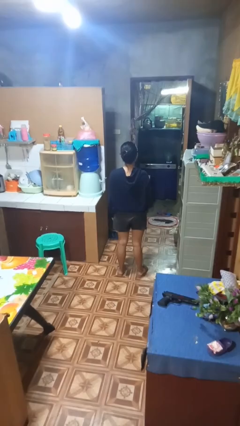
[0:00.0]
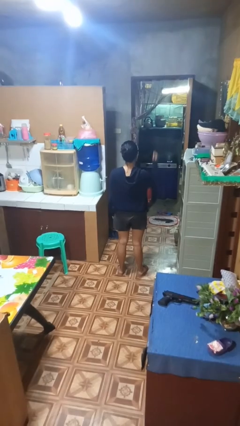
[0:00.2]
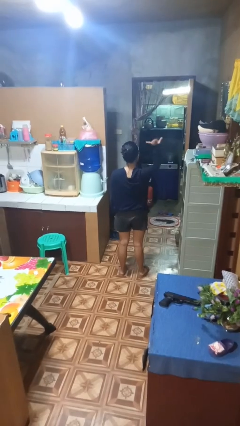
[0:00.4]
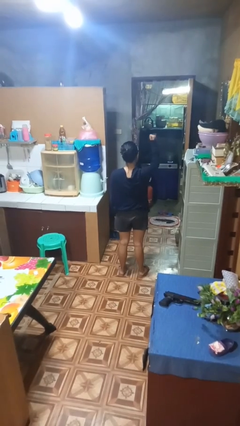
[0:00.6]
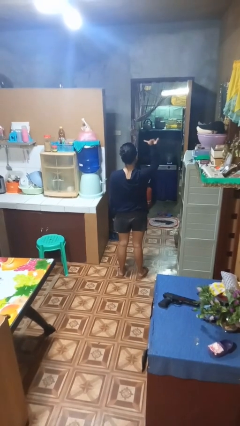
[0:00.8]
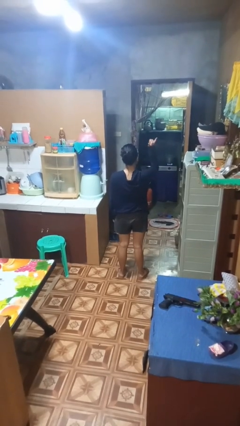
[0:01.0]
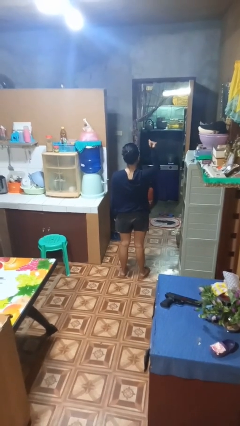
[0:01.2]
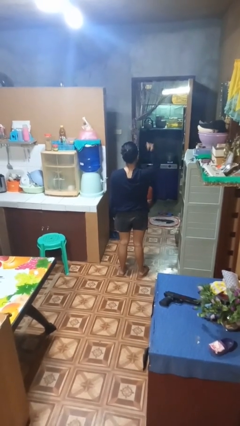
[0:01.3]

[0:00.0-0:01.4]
person gestures hang loose

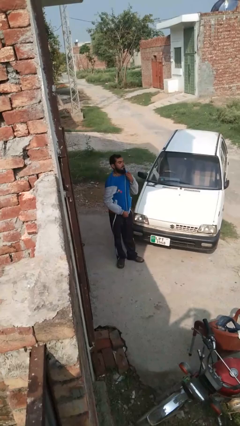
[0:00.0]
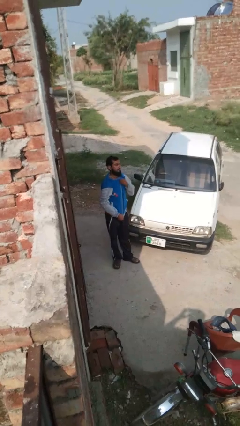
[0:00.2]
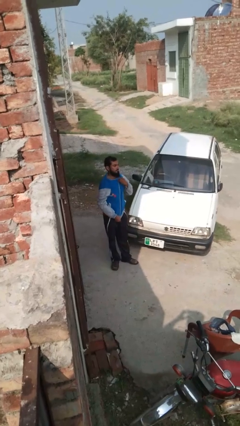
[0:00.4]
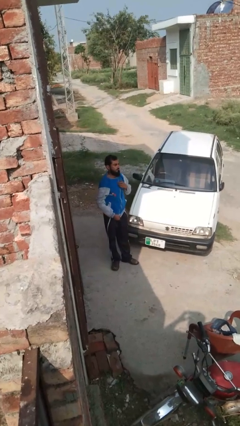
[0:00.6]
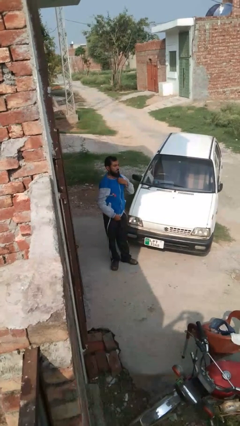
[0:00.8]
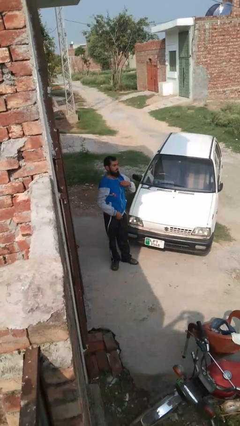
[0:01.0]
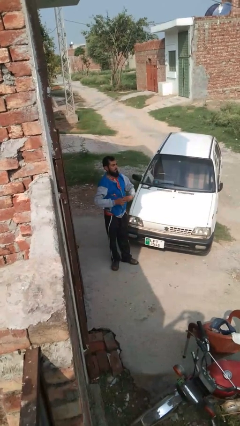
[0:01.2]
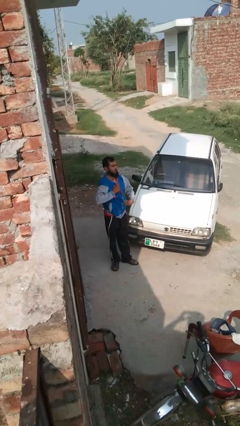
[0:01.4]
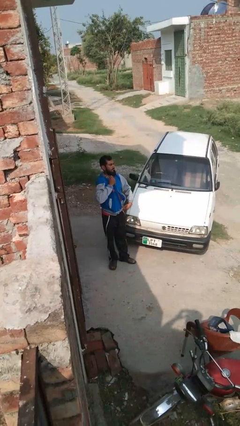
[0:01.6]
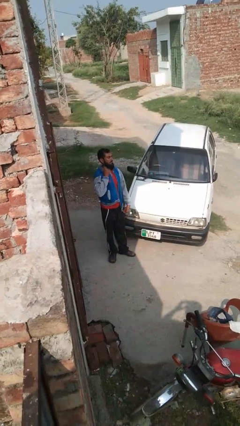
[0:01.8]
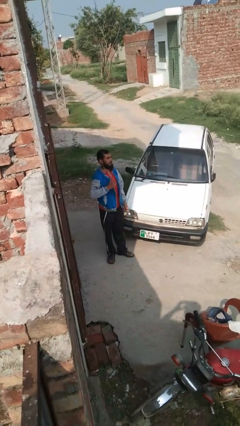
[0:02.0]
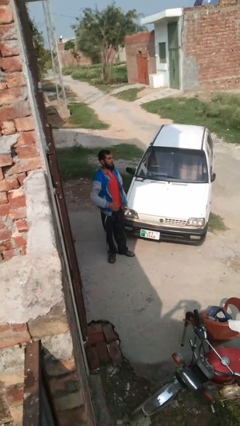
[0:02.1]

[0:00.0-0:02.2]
person unzips jacket

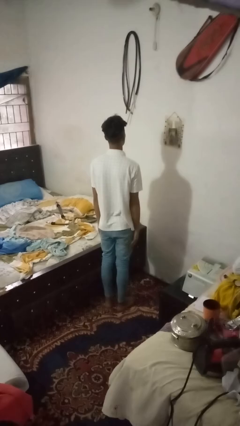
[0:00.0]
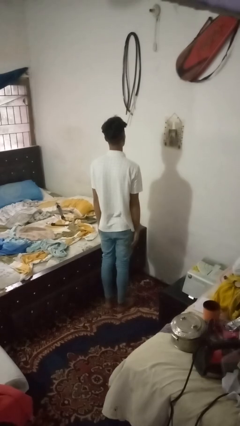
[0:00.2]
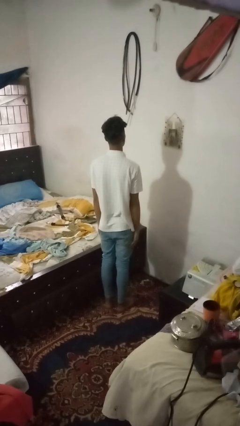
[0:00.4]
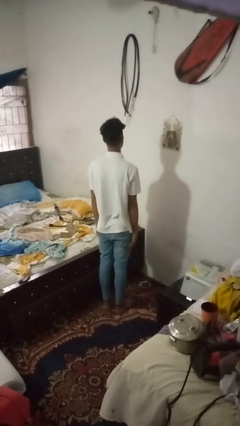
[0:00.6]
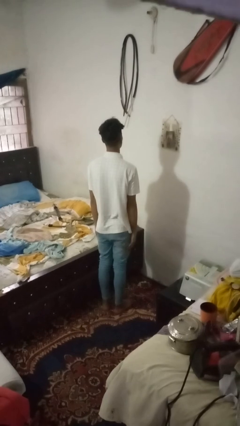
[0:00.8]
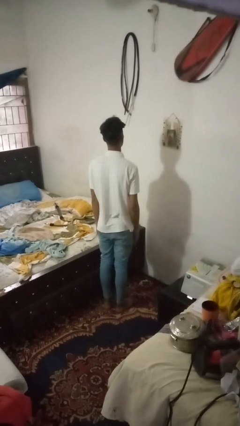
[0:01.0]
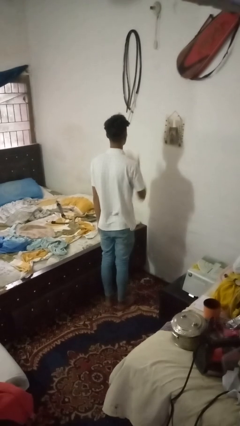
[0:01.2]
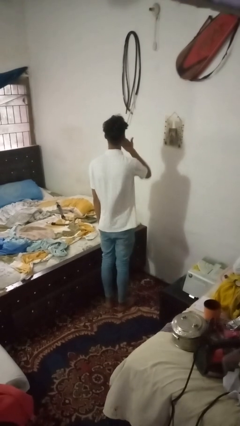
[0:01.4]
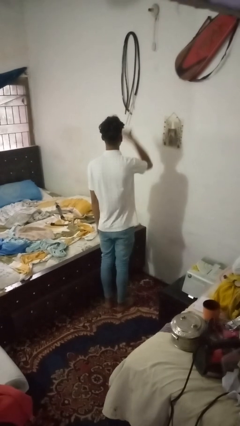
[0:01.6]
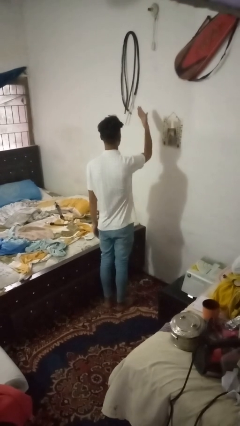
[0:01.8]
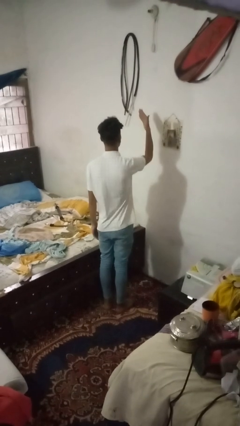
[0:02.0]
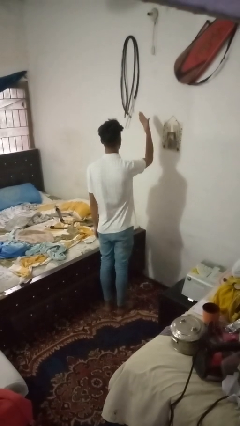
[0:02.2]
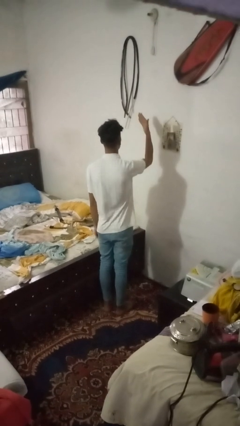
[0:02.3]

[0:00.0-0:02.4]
person gestures blow kiss

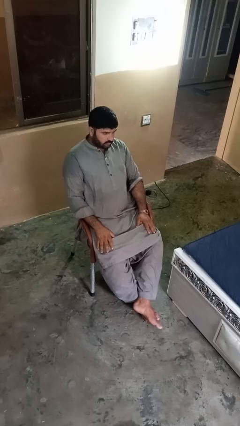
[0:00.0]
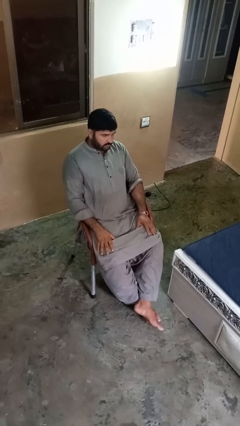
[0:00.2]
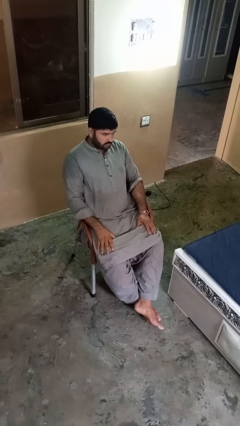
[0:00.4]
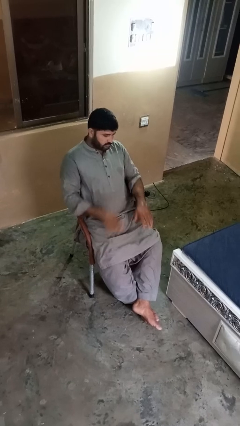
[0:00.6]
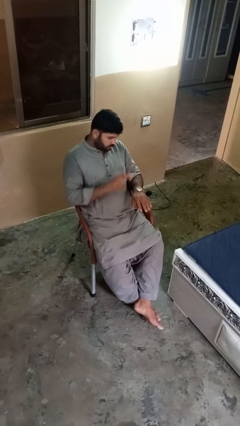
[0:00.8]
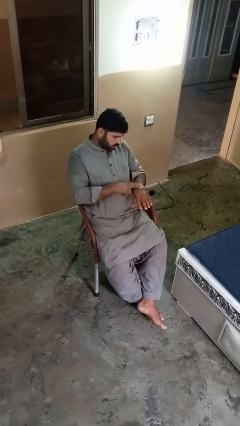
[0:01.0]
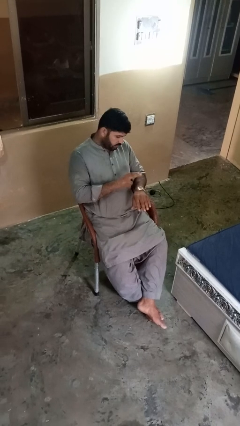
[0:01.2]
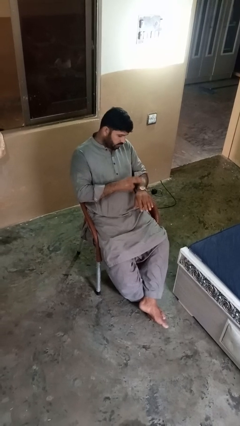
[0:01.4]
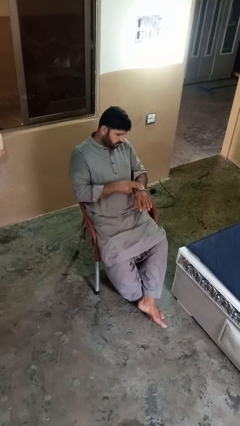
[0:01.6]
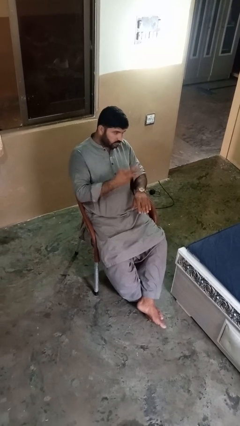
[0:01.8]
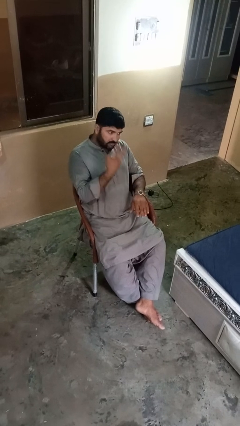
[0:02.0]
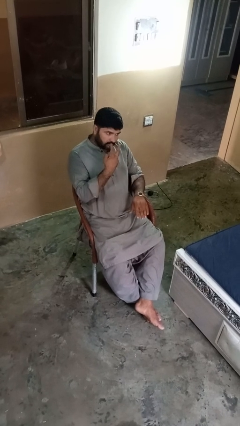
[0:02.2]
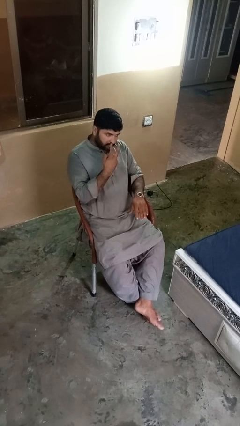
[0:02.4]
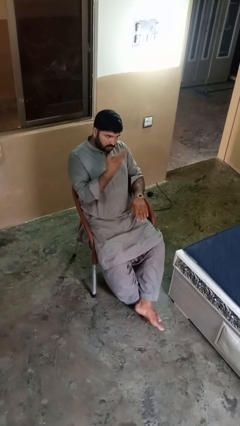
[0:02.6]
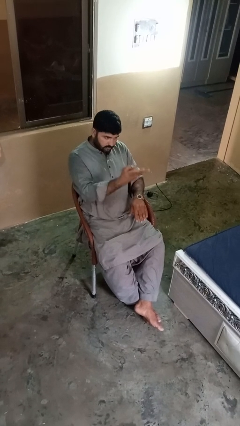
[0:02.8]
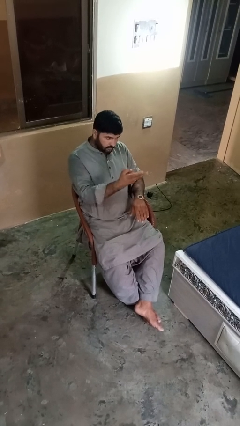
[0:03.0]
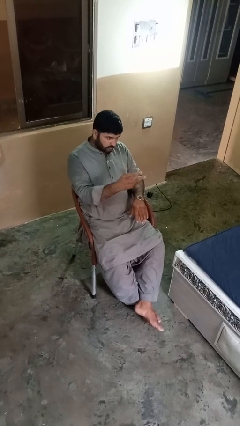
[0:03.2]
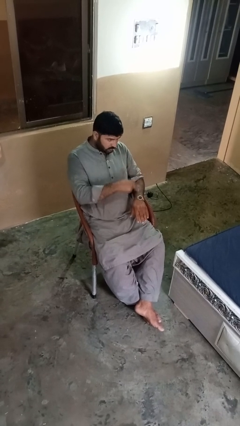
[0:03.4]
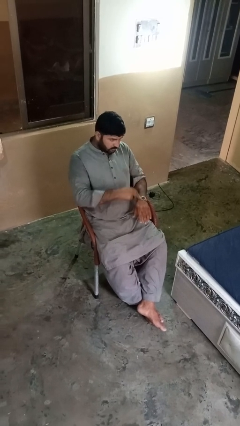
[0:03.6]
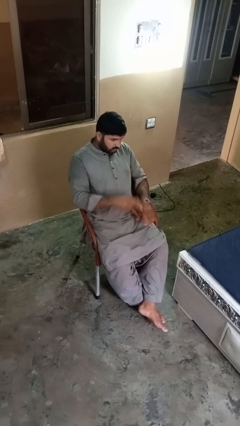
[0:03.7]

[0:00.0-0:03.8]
person gestures watch closely

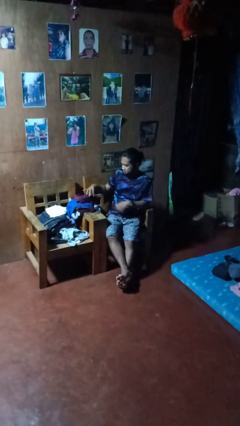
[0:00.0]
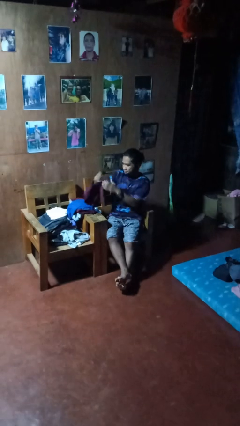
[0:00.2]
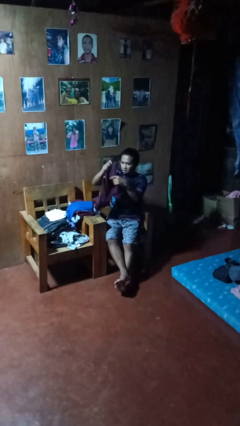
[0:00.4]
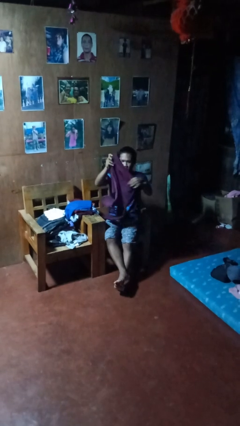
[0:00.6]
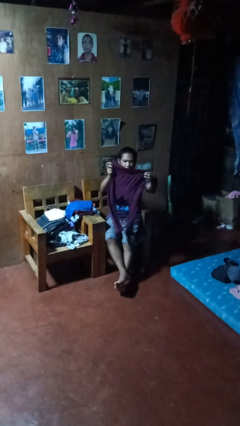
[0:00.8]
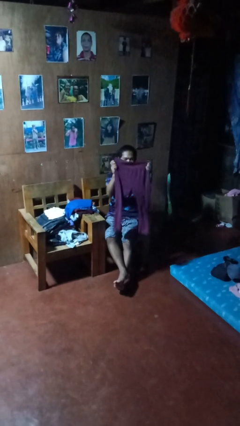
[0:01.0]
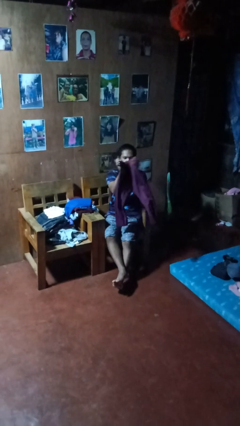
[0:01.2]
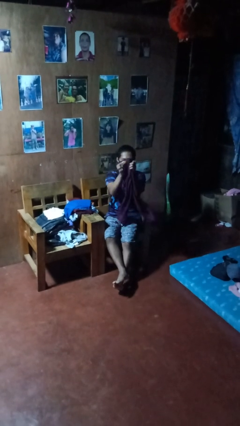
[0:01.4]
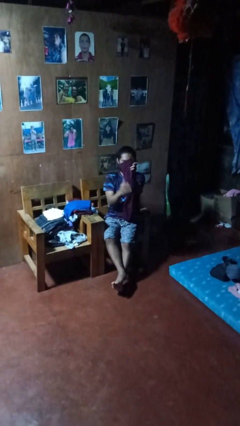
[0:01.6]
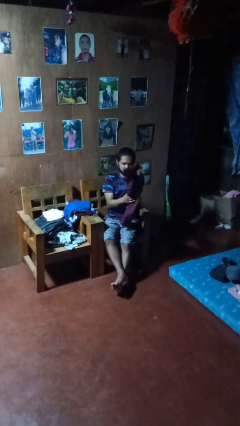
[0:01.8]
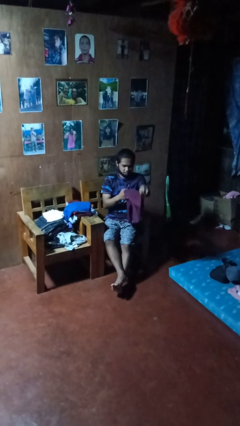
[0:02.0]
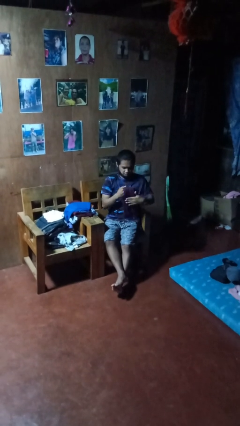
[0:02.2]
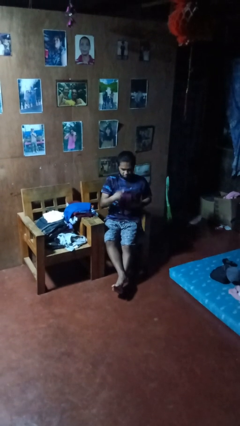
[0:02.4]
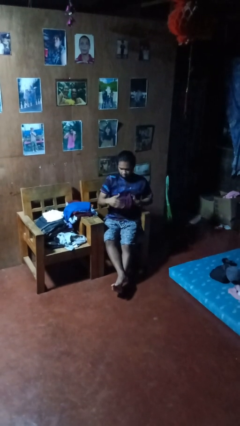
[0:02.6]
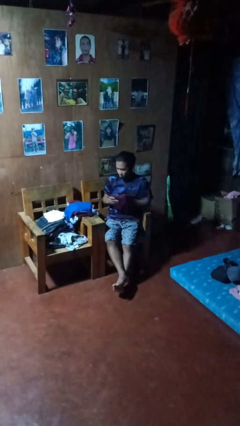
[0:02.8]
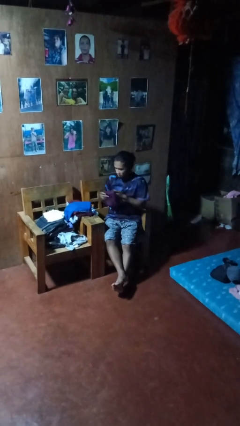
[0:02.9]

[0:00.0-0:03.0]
person folds pants

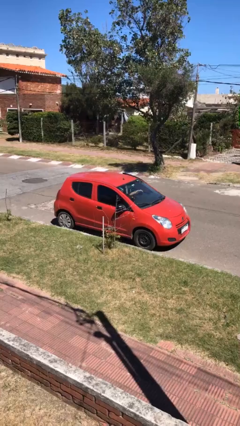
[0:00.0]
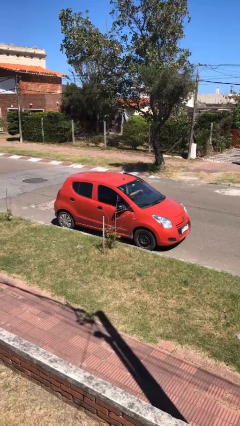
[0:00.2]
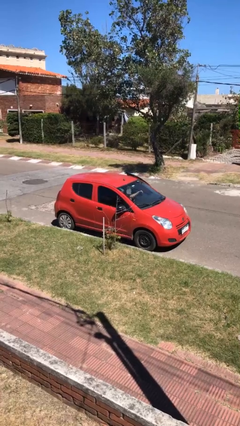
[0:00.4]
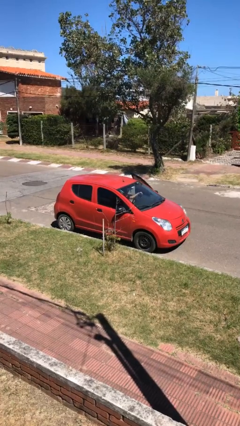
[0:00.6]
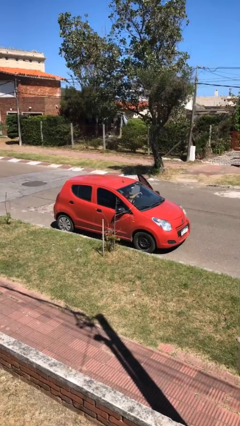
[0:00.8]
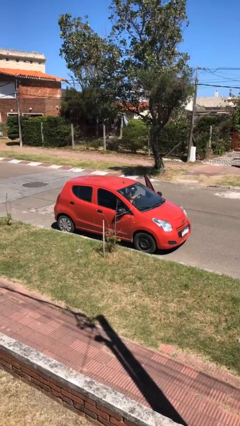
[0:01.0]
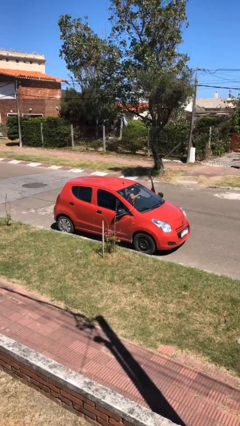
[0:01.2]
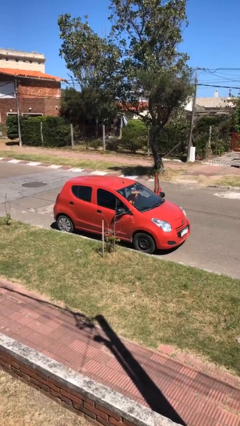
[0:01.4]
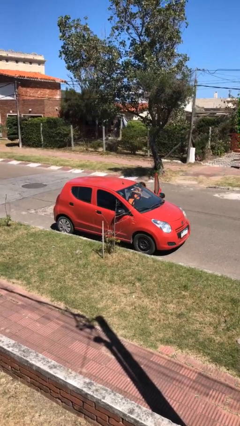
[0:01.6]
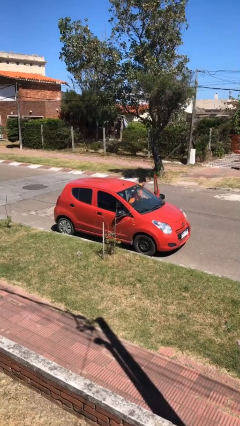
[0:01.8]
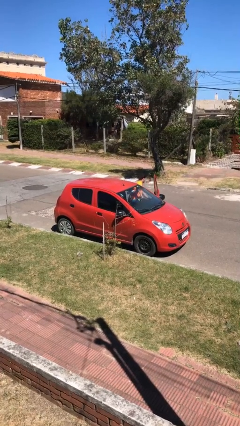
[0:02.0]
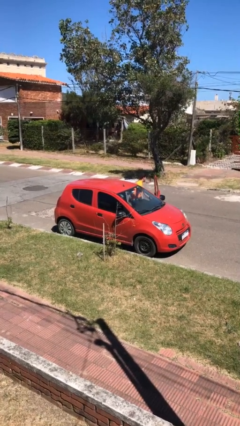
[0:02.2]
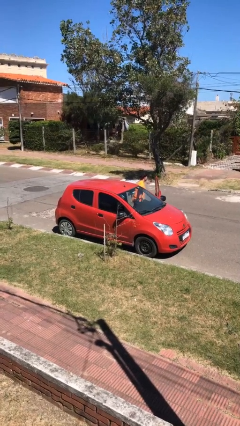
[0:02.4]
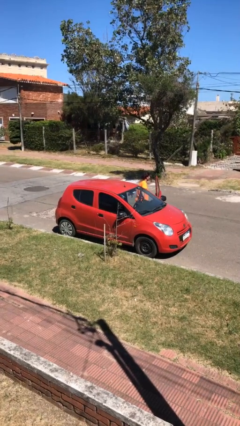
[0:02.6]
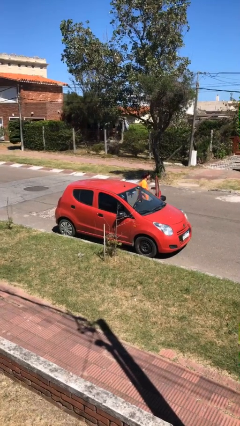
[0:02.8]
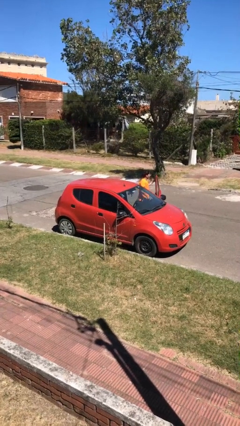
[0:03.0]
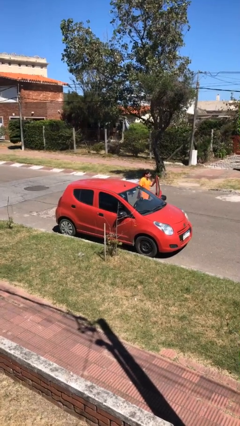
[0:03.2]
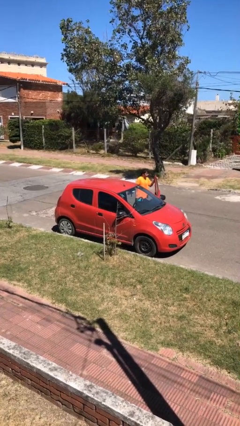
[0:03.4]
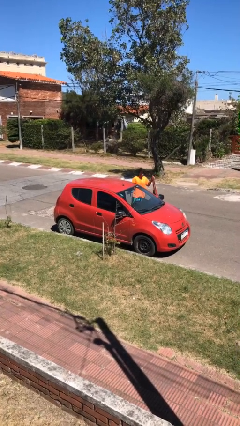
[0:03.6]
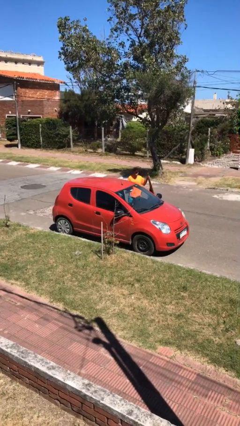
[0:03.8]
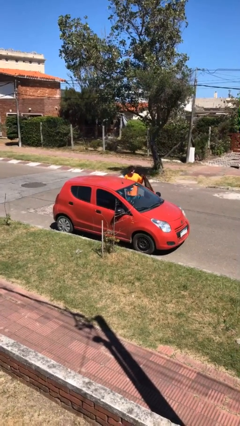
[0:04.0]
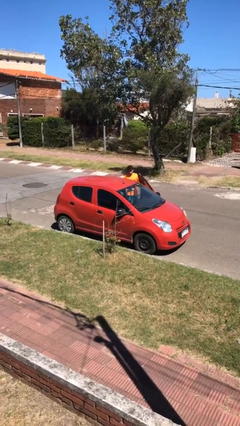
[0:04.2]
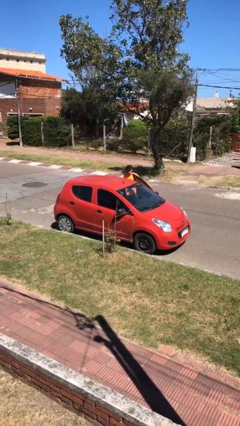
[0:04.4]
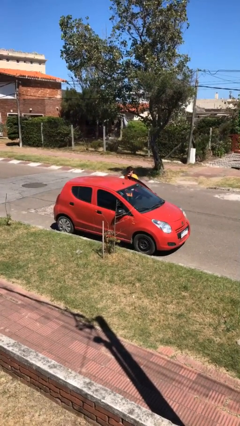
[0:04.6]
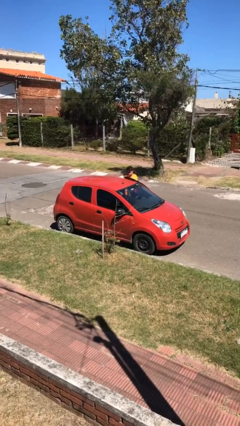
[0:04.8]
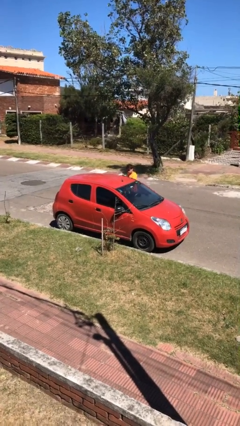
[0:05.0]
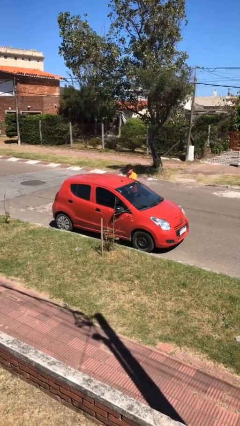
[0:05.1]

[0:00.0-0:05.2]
car drops off person
